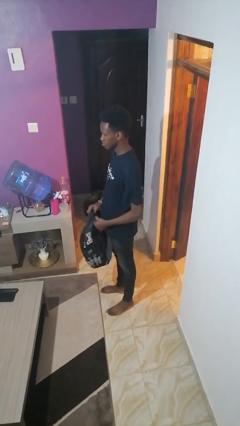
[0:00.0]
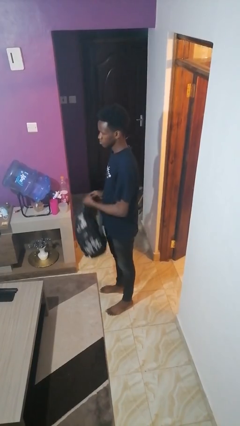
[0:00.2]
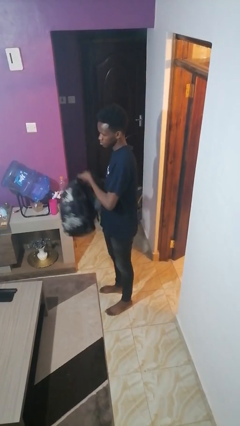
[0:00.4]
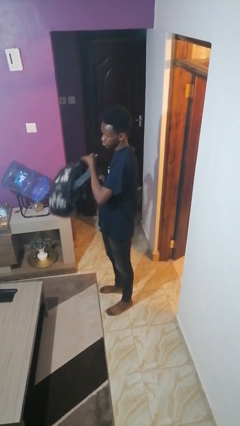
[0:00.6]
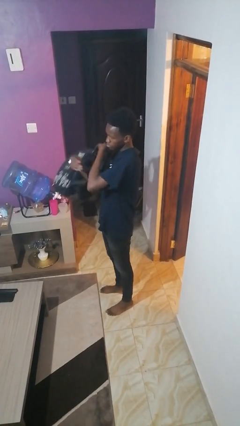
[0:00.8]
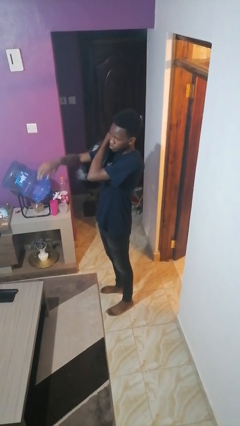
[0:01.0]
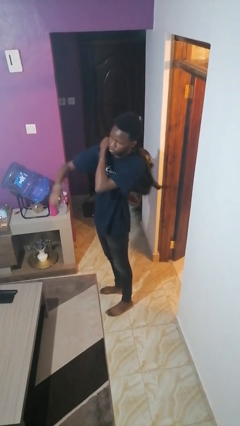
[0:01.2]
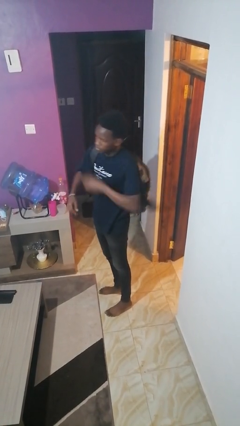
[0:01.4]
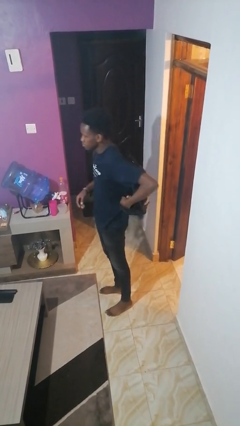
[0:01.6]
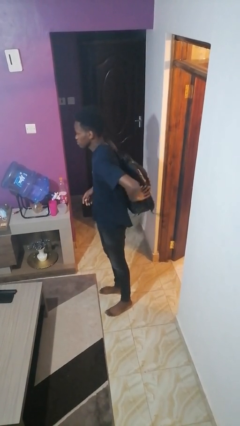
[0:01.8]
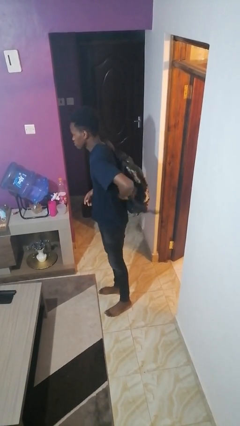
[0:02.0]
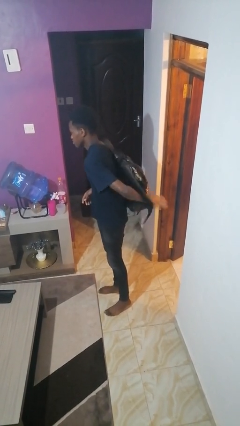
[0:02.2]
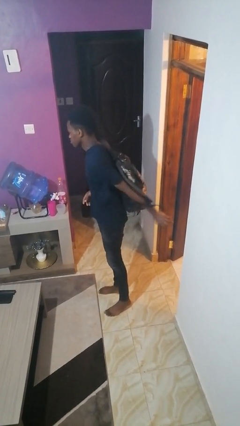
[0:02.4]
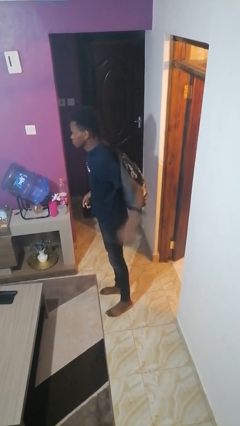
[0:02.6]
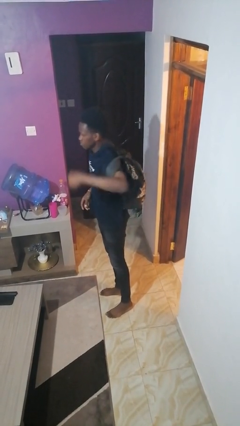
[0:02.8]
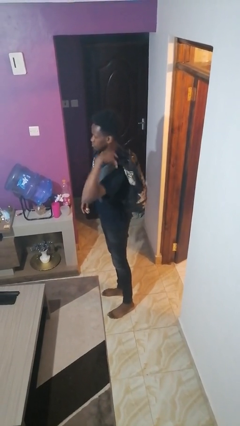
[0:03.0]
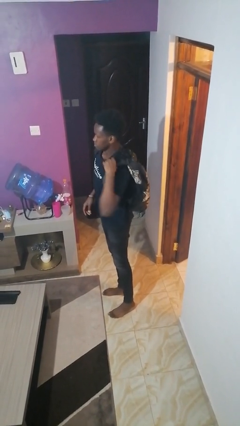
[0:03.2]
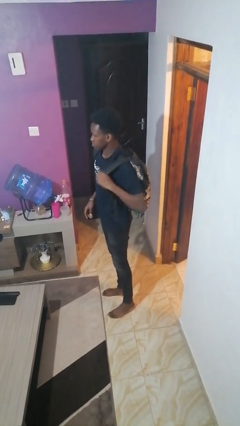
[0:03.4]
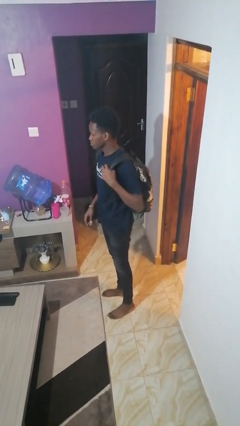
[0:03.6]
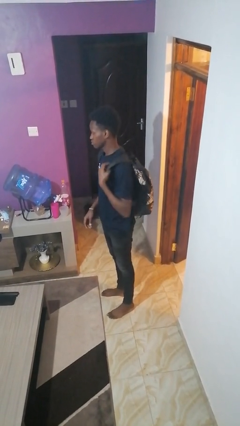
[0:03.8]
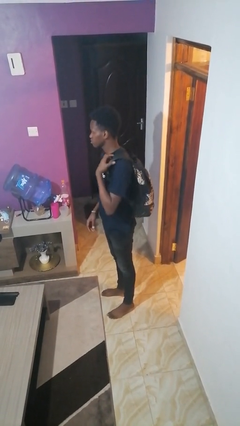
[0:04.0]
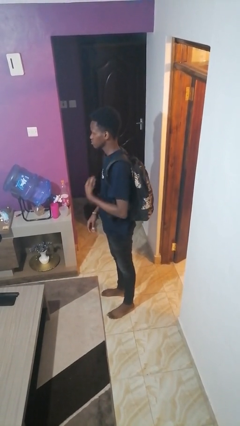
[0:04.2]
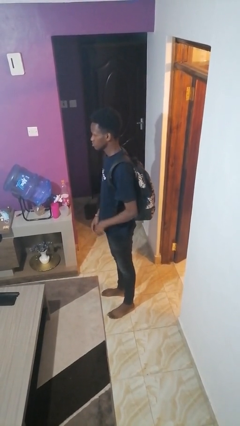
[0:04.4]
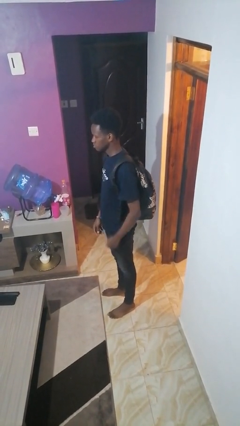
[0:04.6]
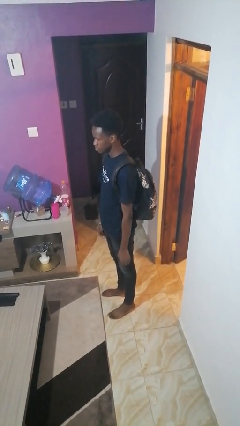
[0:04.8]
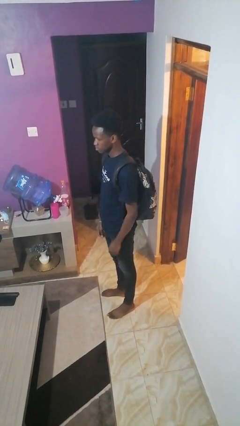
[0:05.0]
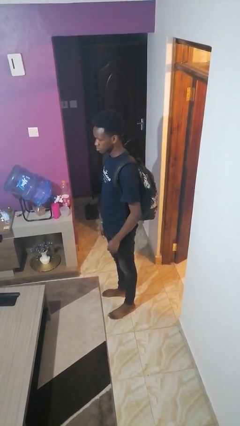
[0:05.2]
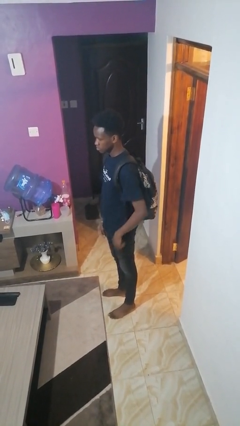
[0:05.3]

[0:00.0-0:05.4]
person puts on backpack

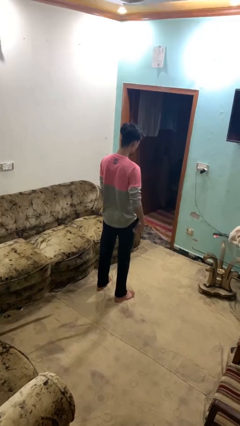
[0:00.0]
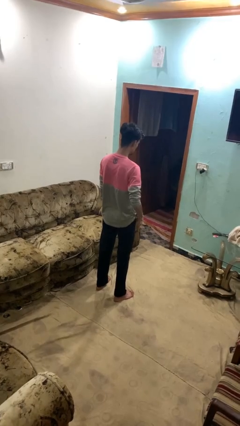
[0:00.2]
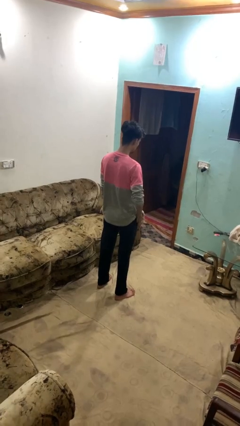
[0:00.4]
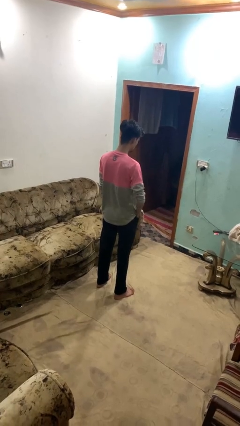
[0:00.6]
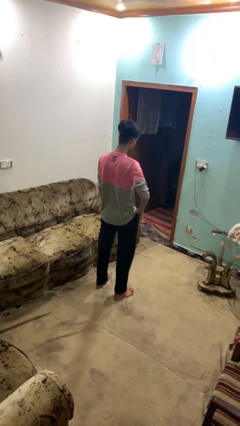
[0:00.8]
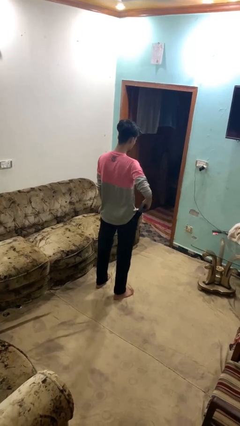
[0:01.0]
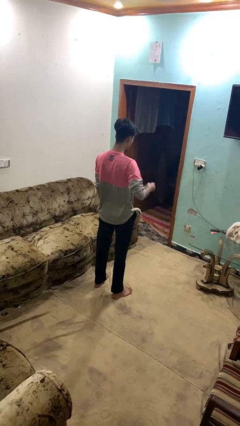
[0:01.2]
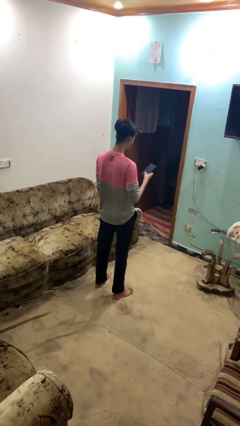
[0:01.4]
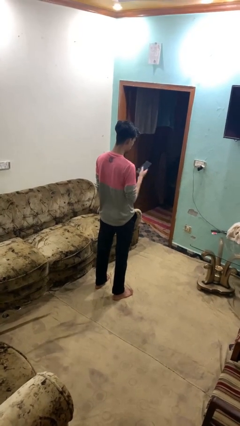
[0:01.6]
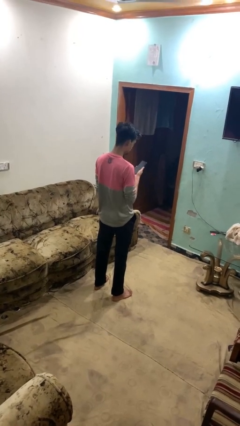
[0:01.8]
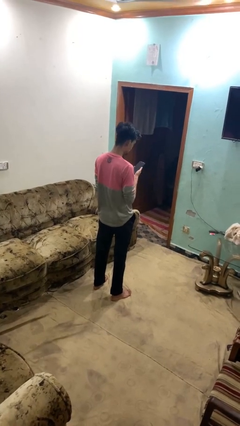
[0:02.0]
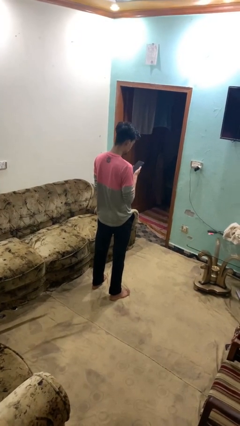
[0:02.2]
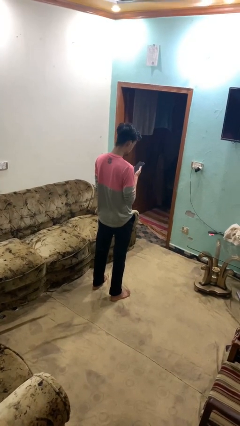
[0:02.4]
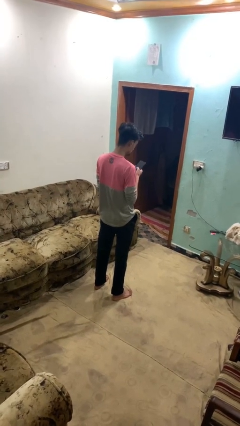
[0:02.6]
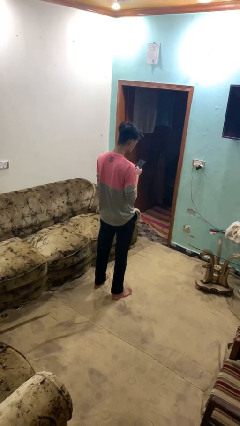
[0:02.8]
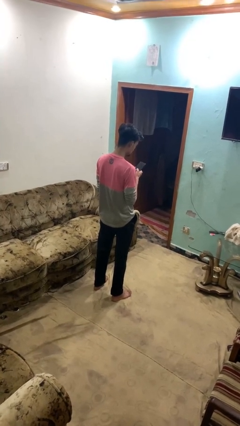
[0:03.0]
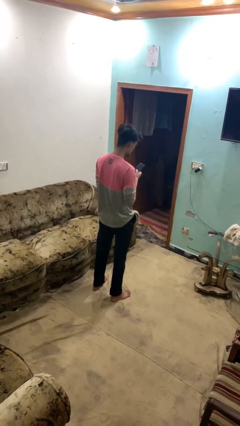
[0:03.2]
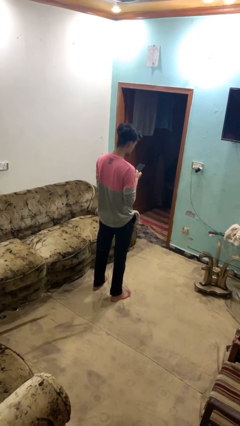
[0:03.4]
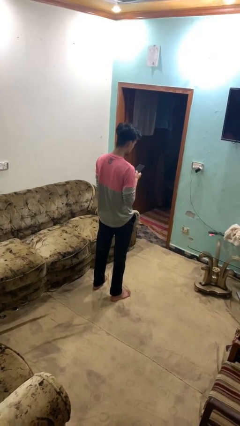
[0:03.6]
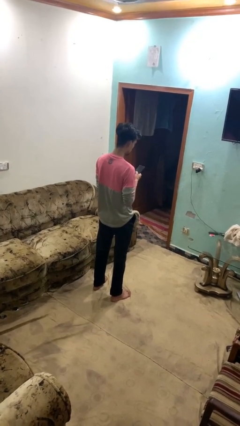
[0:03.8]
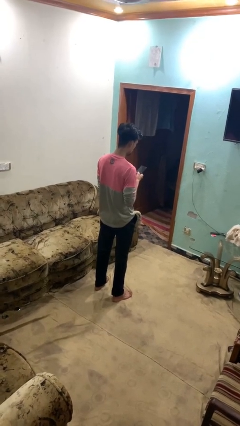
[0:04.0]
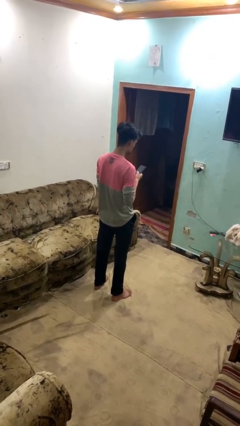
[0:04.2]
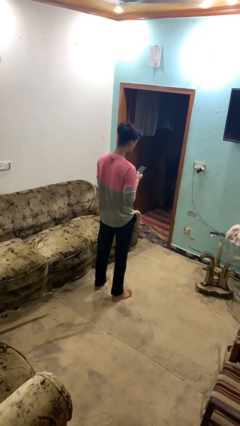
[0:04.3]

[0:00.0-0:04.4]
person takes phone from pocket

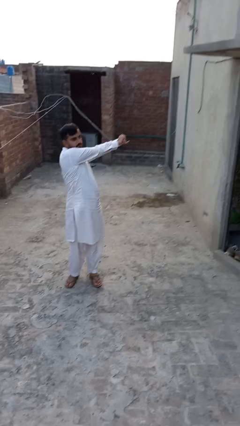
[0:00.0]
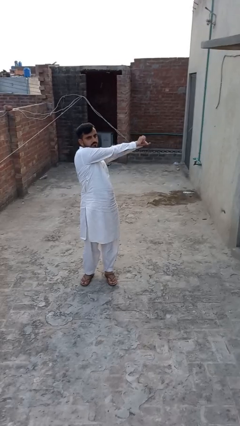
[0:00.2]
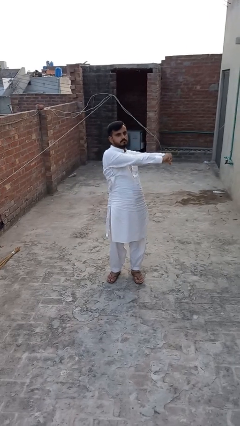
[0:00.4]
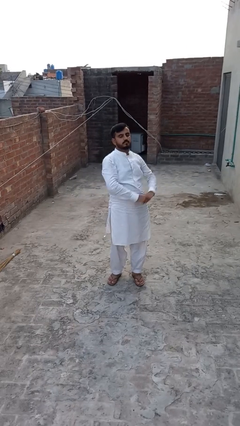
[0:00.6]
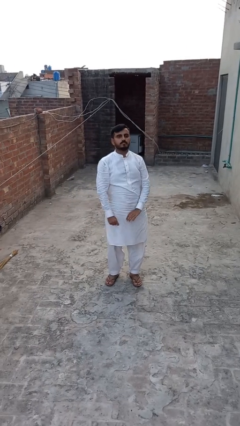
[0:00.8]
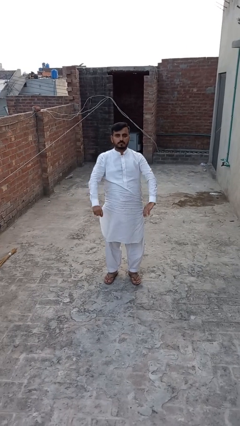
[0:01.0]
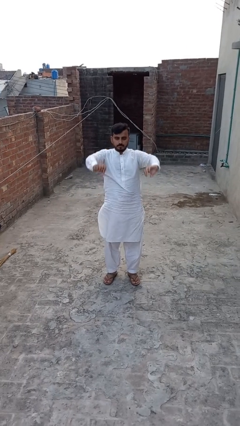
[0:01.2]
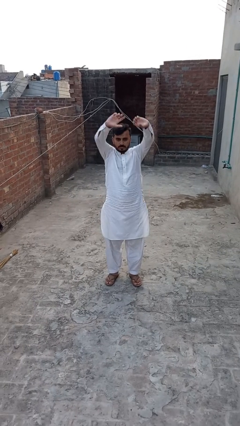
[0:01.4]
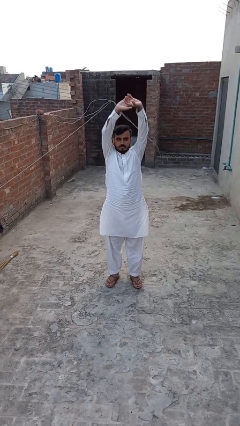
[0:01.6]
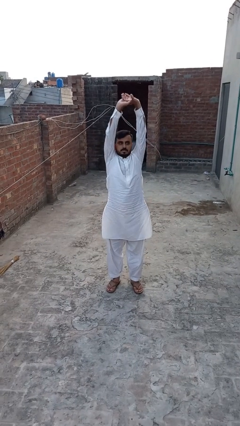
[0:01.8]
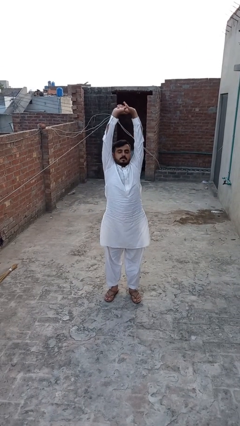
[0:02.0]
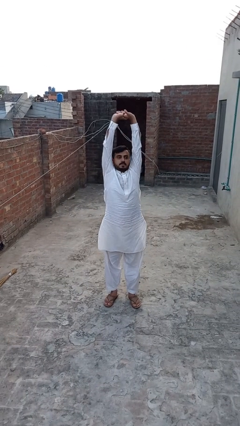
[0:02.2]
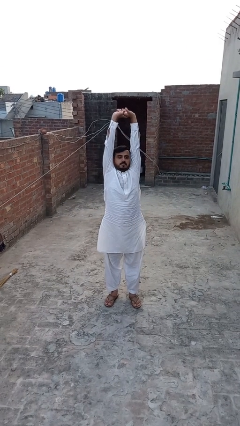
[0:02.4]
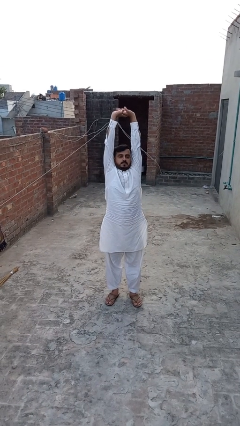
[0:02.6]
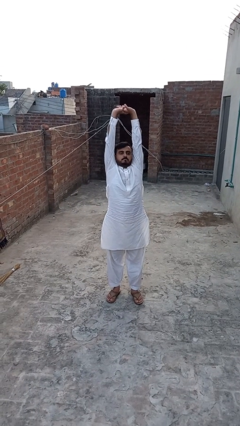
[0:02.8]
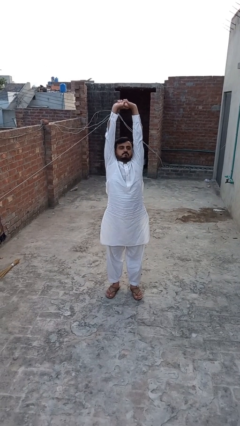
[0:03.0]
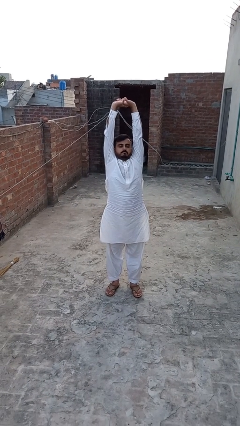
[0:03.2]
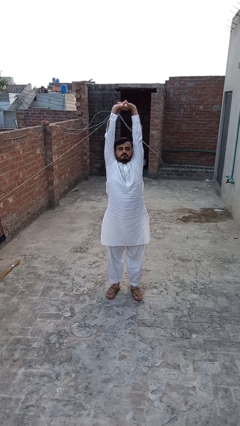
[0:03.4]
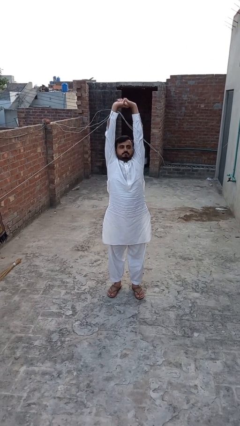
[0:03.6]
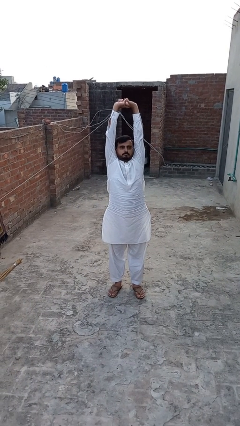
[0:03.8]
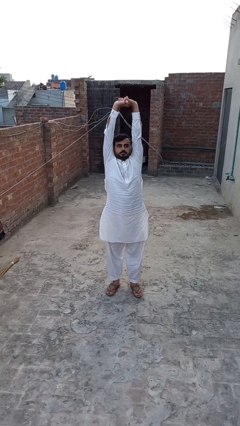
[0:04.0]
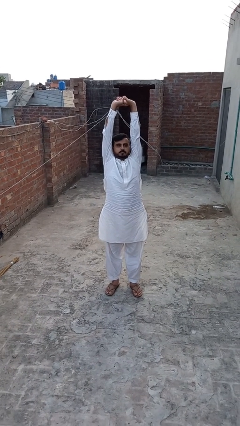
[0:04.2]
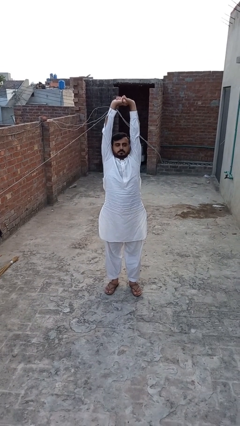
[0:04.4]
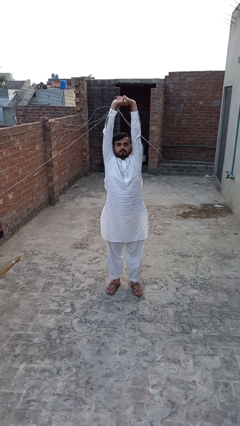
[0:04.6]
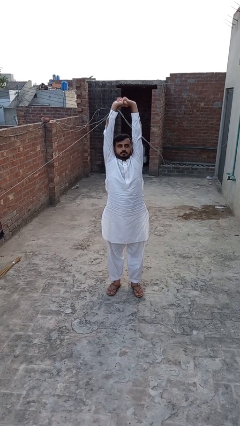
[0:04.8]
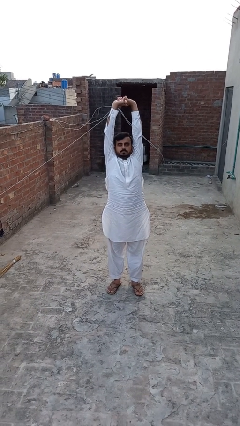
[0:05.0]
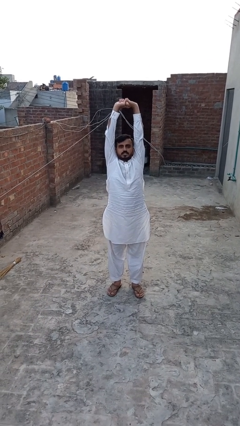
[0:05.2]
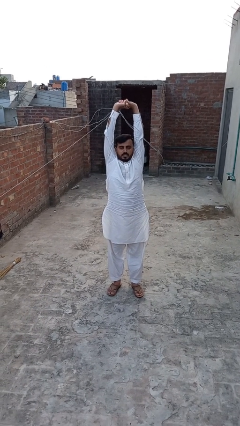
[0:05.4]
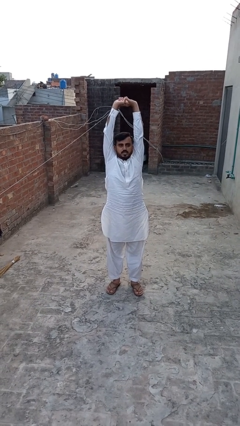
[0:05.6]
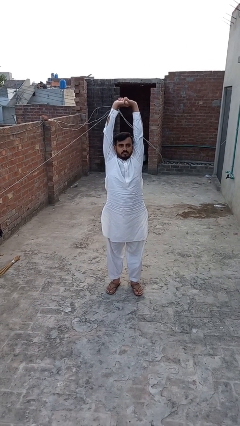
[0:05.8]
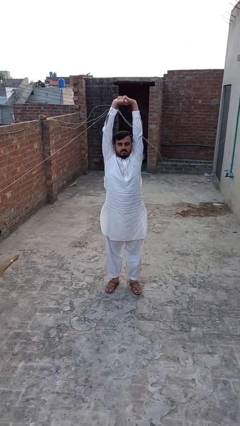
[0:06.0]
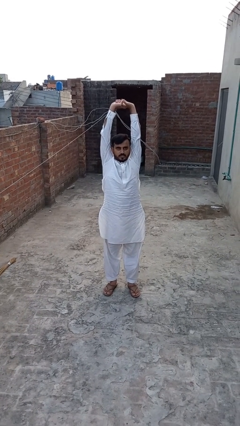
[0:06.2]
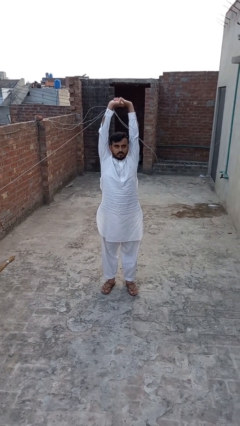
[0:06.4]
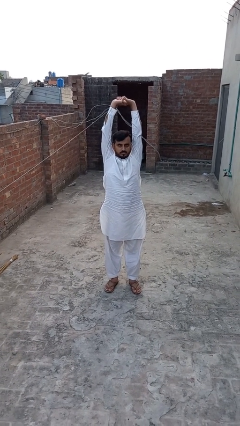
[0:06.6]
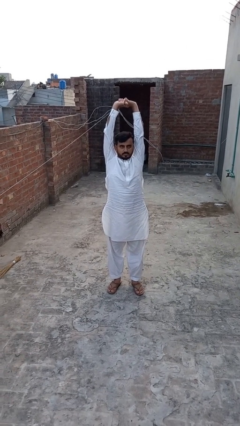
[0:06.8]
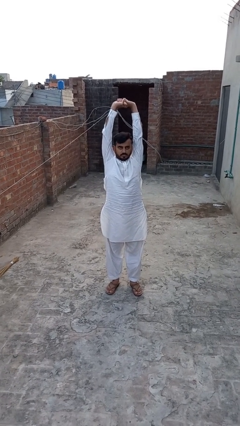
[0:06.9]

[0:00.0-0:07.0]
person stretches arms over head

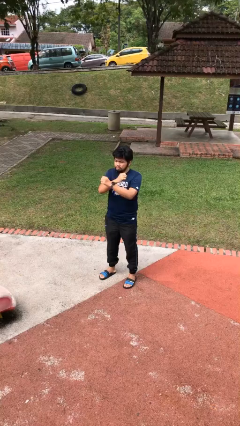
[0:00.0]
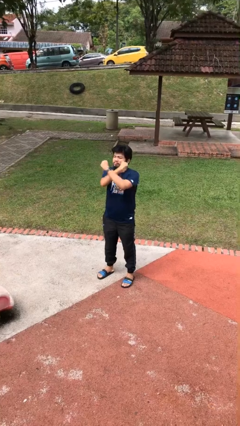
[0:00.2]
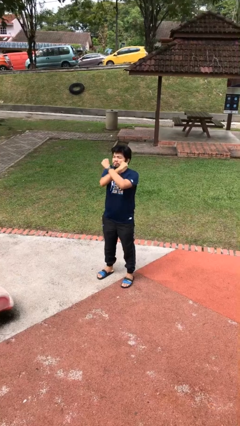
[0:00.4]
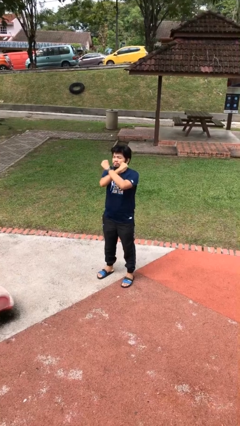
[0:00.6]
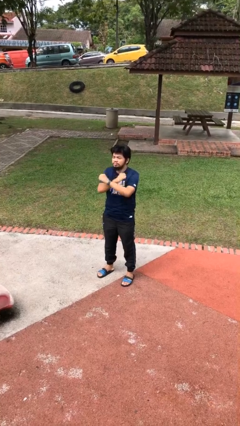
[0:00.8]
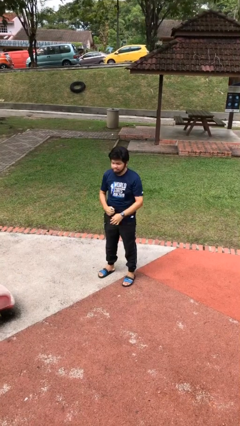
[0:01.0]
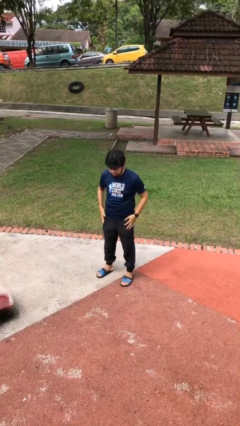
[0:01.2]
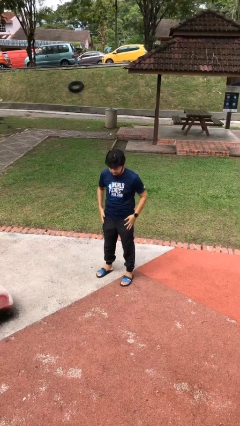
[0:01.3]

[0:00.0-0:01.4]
person gestures arms x
